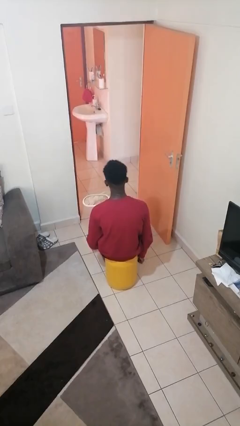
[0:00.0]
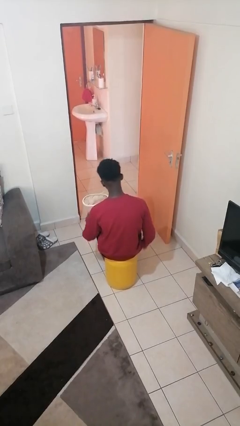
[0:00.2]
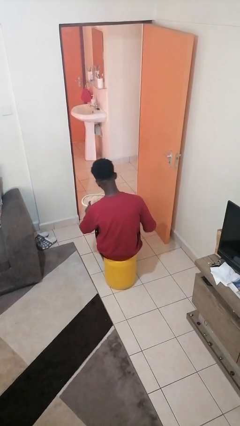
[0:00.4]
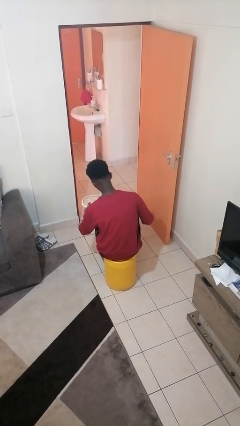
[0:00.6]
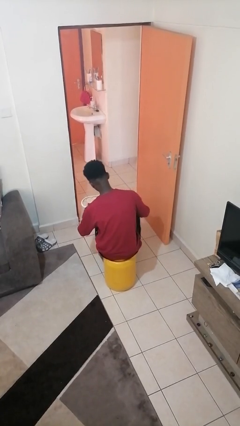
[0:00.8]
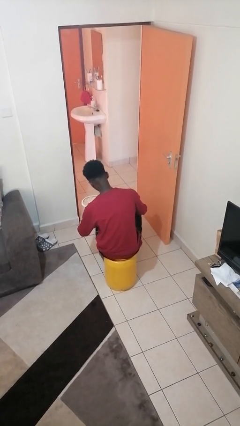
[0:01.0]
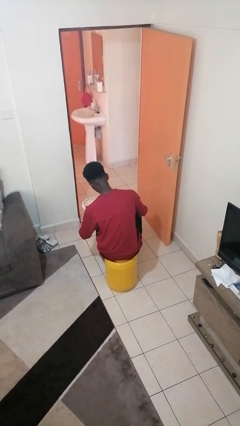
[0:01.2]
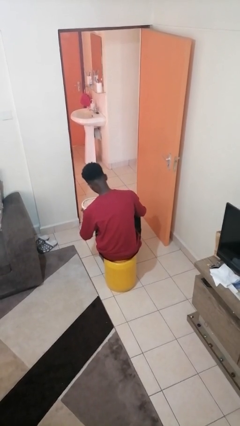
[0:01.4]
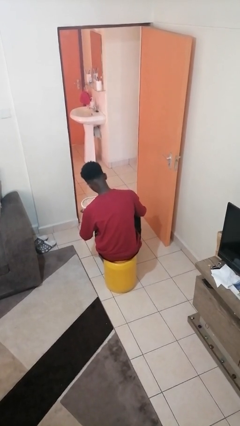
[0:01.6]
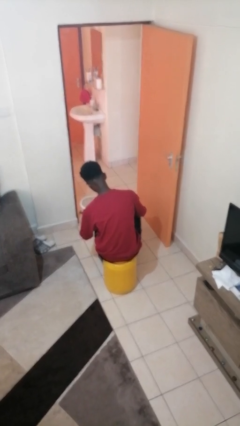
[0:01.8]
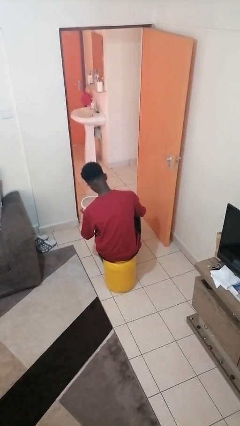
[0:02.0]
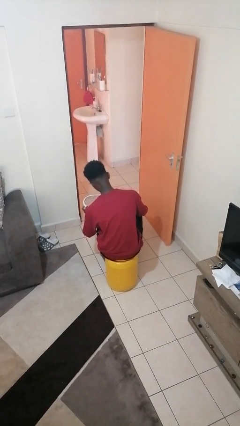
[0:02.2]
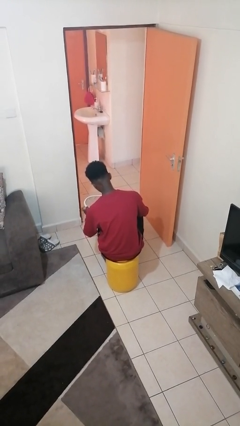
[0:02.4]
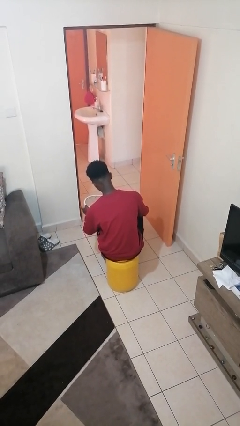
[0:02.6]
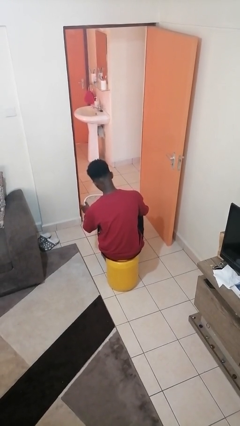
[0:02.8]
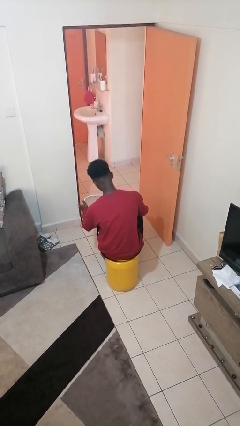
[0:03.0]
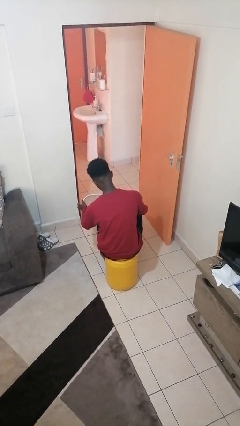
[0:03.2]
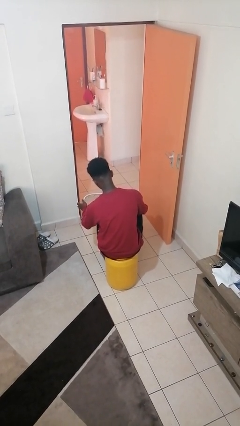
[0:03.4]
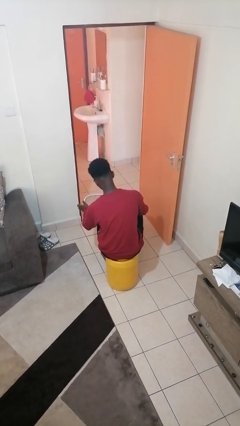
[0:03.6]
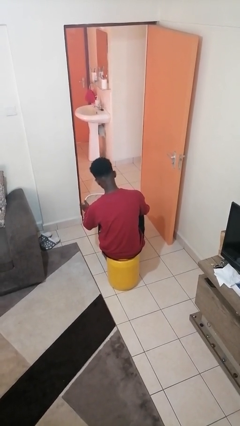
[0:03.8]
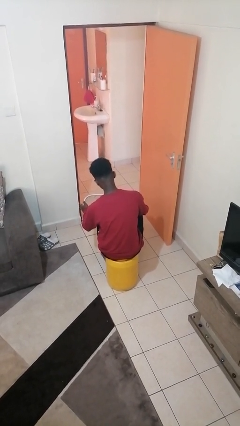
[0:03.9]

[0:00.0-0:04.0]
person taps object with finger

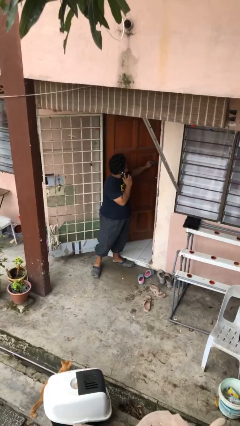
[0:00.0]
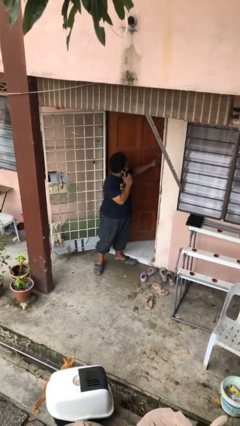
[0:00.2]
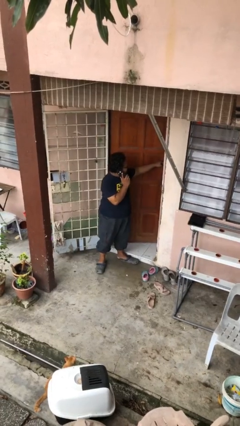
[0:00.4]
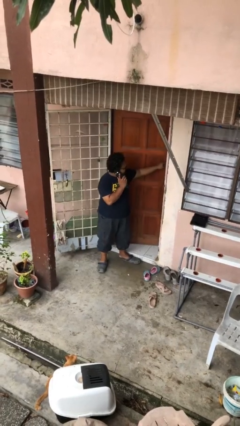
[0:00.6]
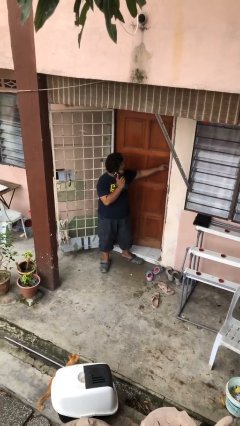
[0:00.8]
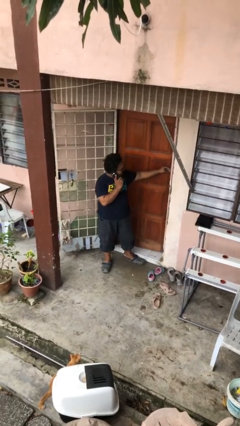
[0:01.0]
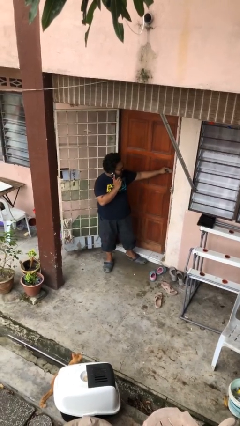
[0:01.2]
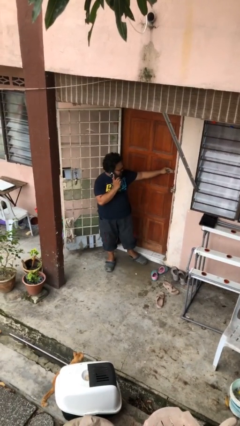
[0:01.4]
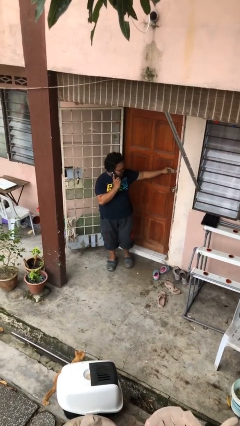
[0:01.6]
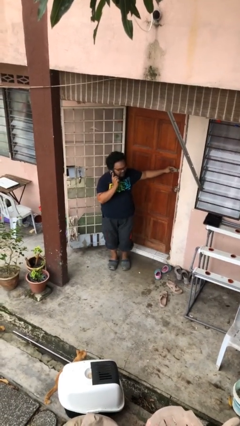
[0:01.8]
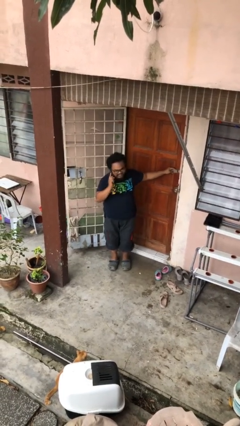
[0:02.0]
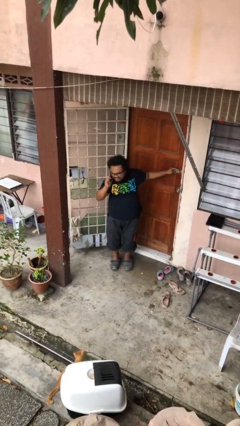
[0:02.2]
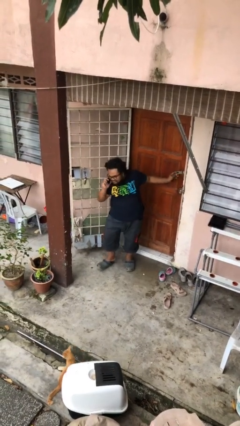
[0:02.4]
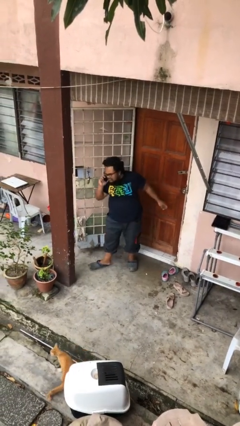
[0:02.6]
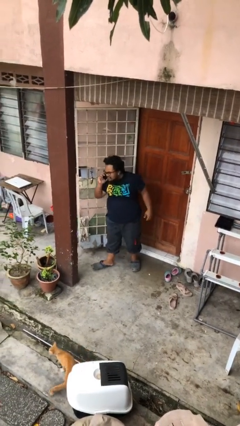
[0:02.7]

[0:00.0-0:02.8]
person closes facility door

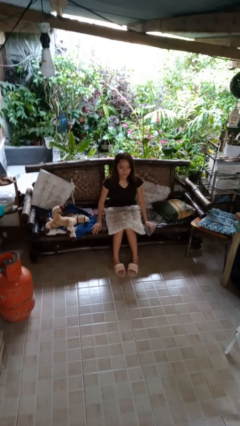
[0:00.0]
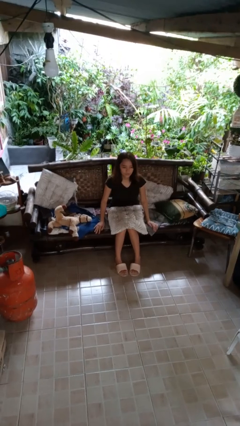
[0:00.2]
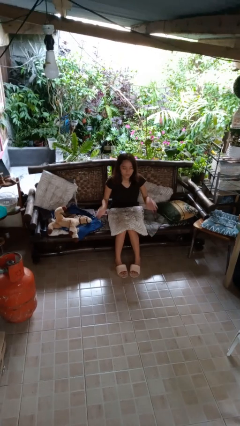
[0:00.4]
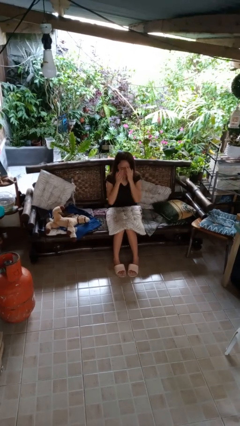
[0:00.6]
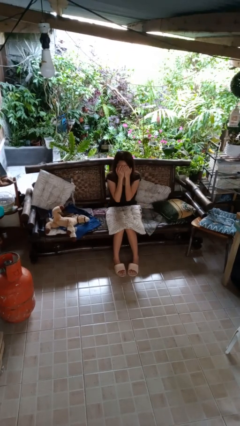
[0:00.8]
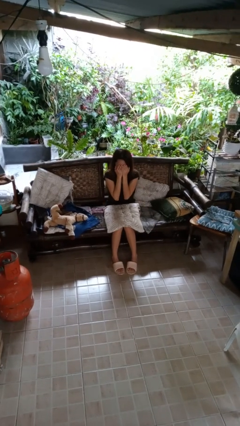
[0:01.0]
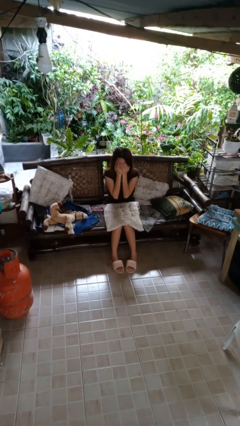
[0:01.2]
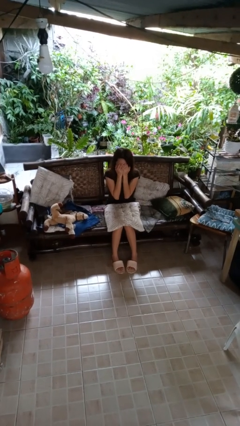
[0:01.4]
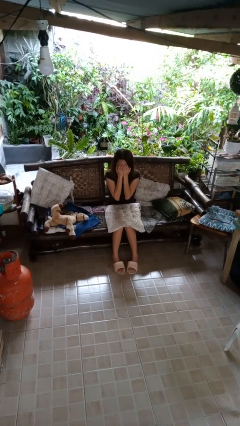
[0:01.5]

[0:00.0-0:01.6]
person covers face with hands

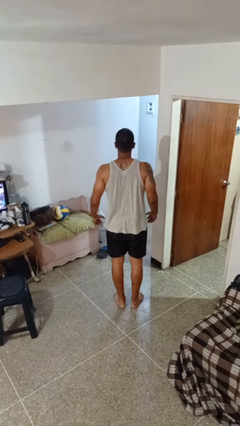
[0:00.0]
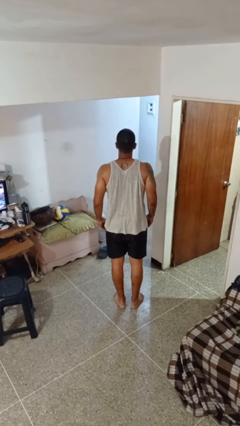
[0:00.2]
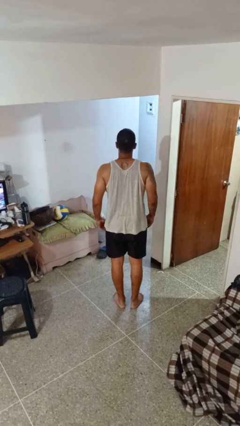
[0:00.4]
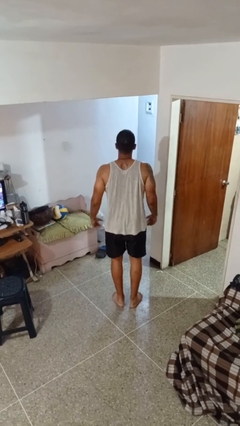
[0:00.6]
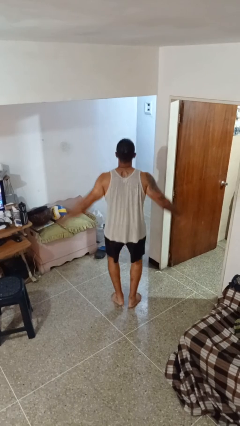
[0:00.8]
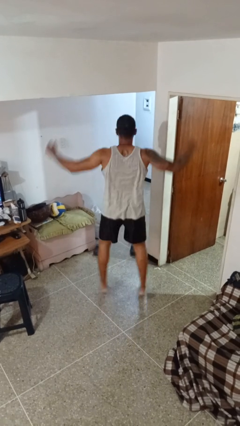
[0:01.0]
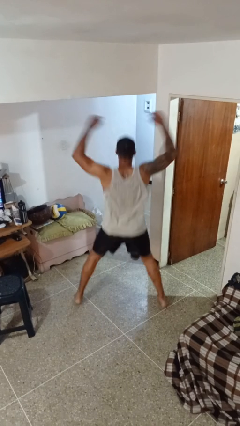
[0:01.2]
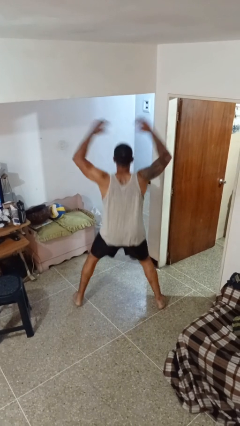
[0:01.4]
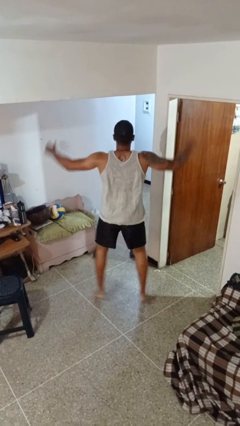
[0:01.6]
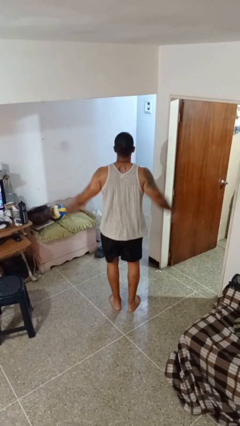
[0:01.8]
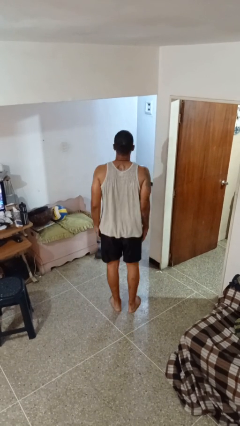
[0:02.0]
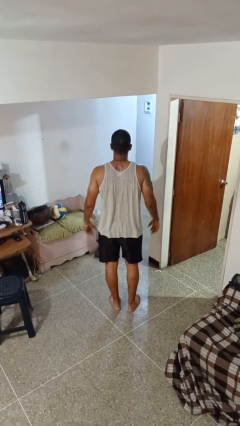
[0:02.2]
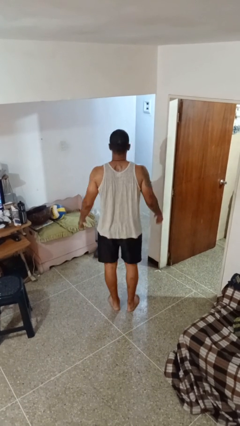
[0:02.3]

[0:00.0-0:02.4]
person exercises with jumping jacks

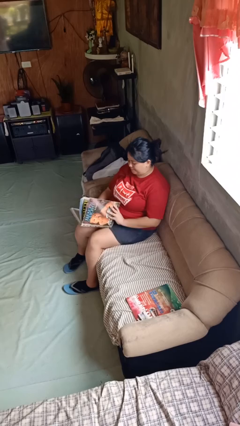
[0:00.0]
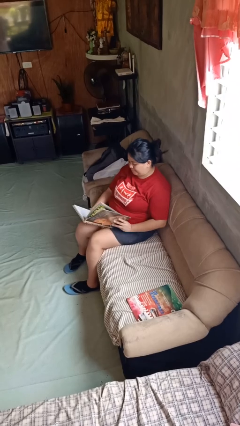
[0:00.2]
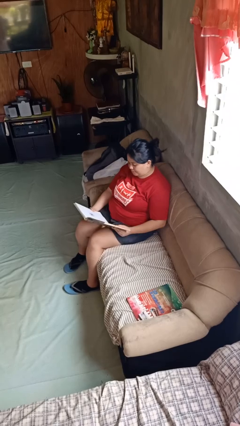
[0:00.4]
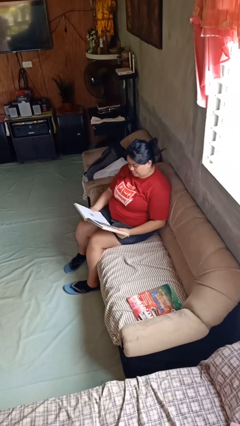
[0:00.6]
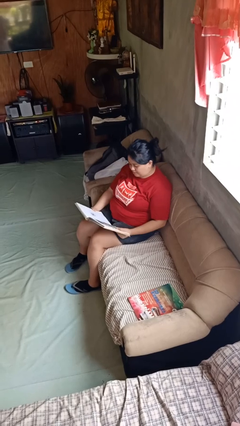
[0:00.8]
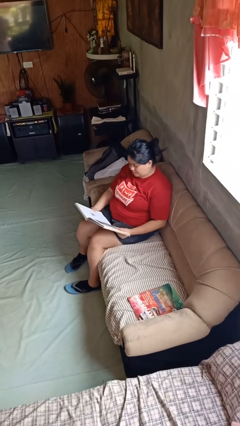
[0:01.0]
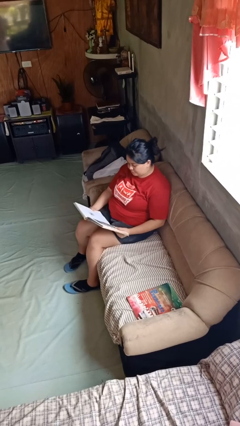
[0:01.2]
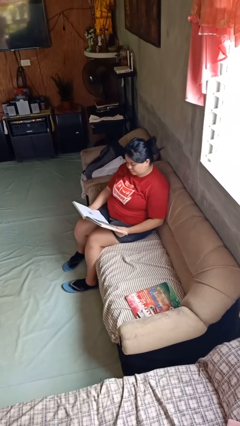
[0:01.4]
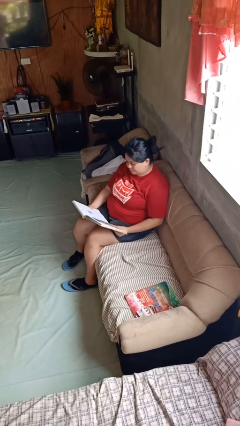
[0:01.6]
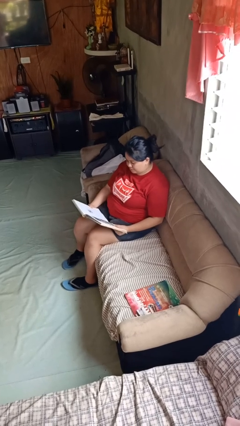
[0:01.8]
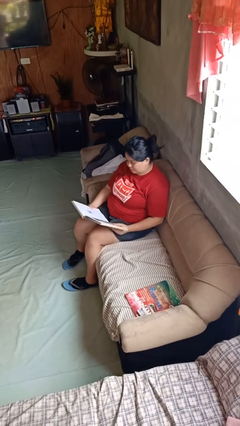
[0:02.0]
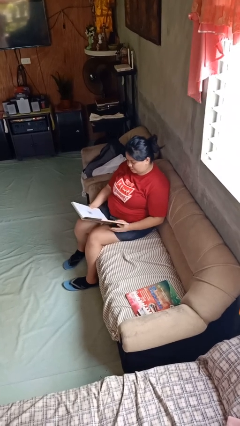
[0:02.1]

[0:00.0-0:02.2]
person reads book

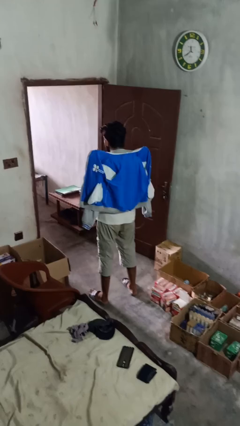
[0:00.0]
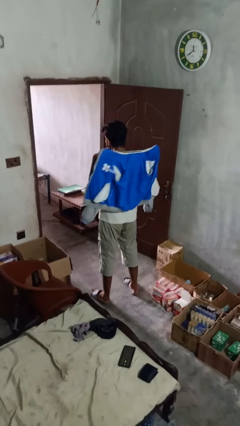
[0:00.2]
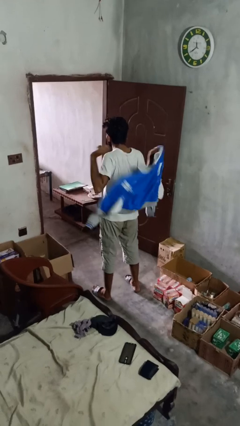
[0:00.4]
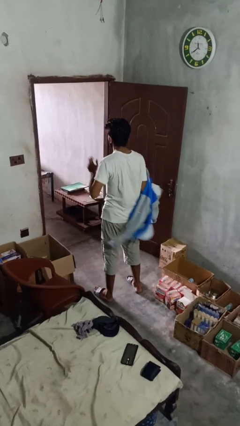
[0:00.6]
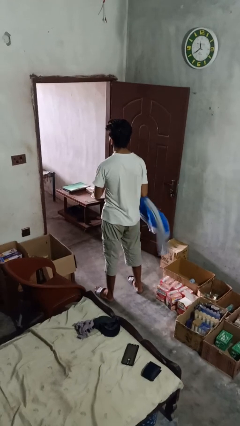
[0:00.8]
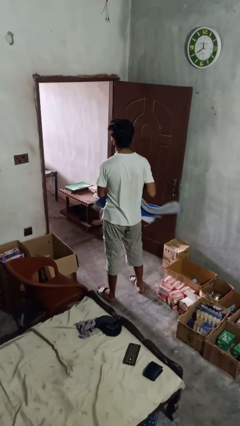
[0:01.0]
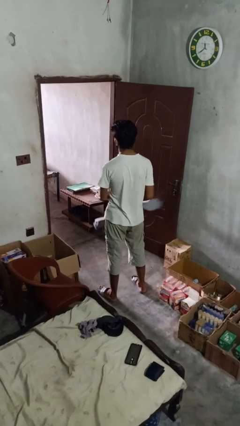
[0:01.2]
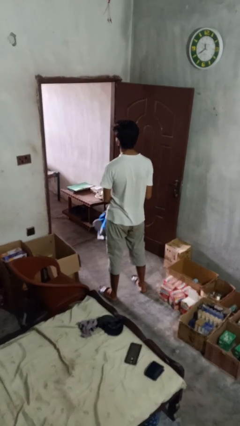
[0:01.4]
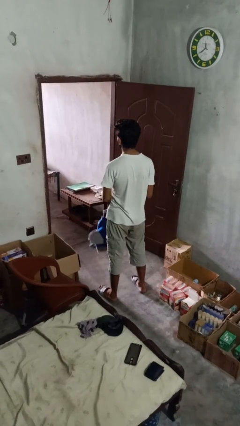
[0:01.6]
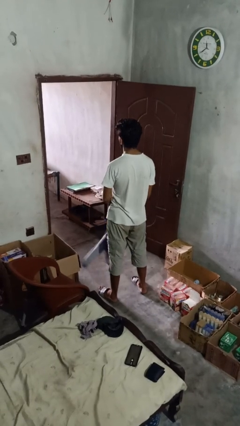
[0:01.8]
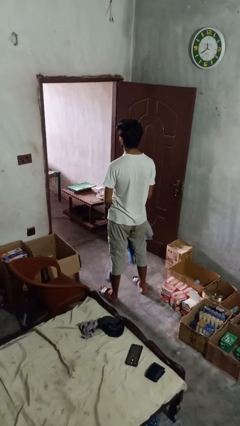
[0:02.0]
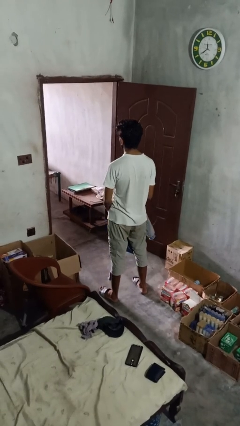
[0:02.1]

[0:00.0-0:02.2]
person takes off jacket

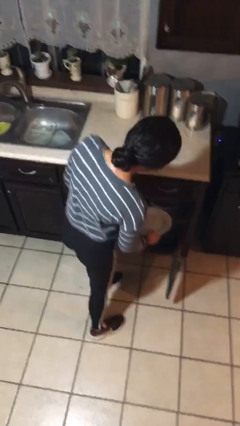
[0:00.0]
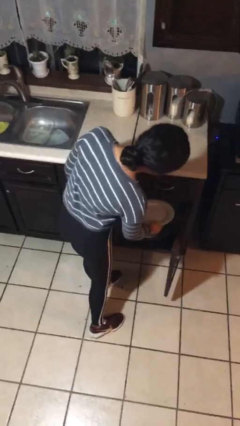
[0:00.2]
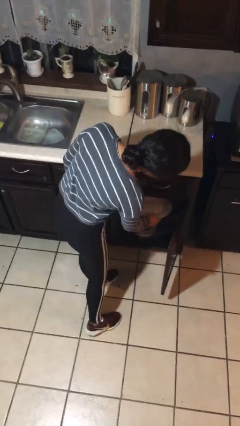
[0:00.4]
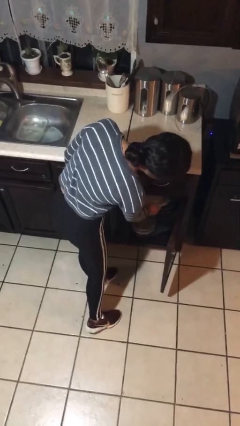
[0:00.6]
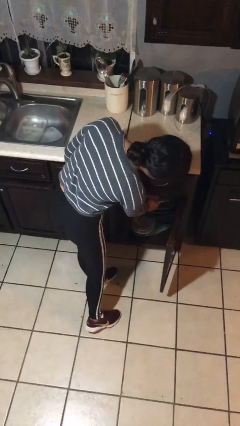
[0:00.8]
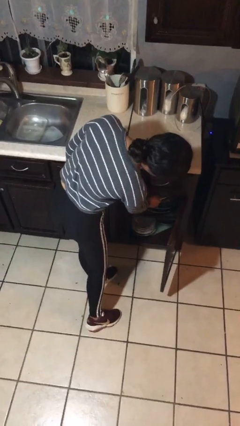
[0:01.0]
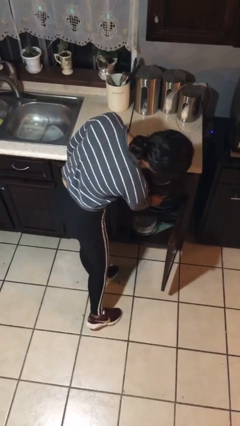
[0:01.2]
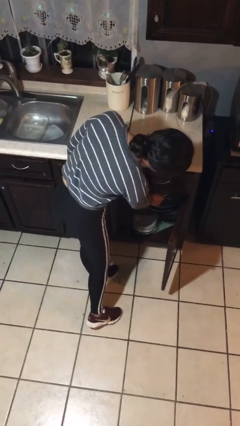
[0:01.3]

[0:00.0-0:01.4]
person takes object from cabinet

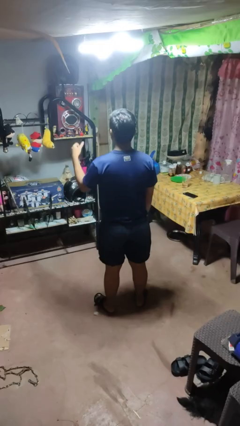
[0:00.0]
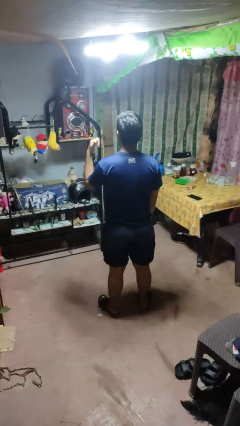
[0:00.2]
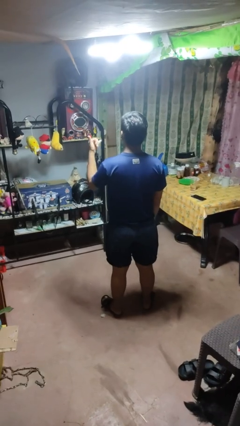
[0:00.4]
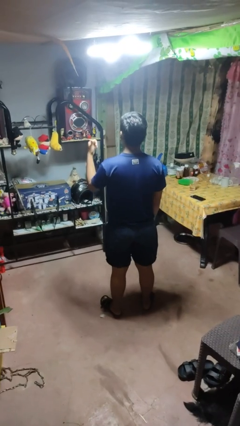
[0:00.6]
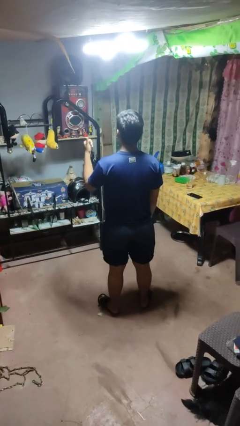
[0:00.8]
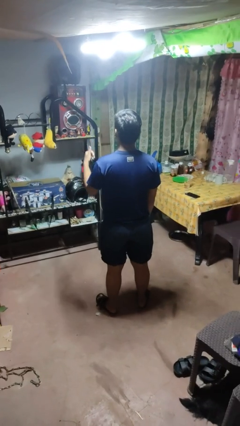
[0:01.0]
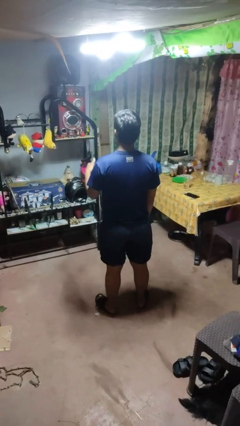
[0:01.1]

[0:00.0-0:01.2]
person gestures hang loose
